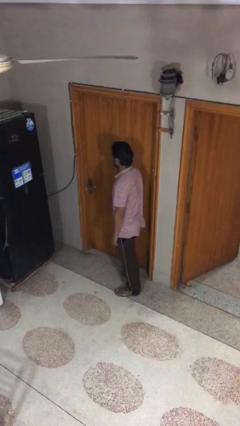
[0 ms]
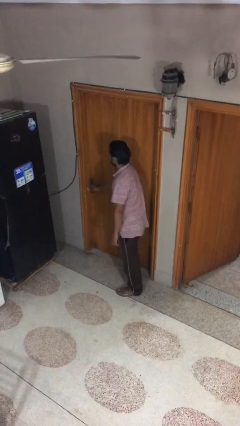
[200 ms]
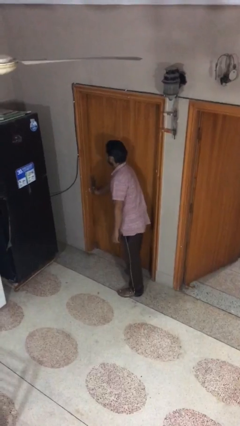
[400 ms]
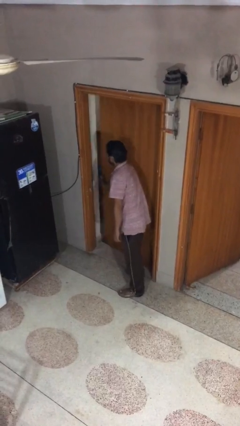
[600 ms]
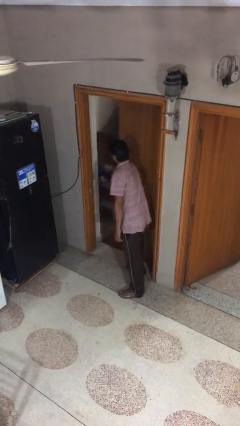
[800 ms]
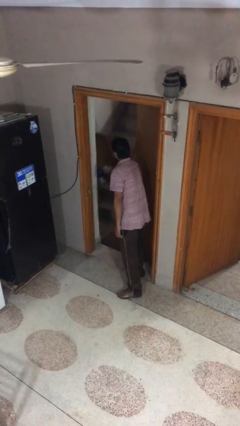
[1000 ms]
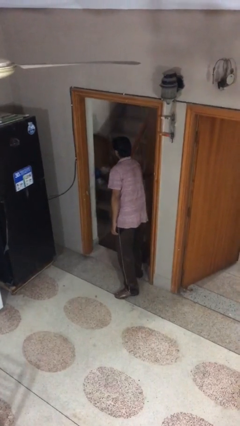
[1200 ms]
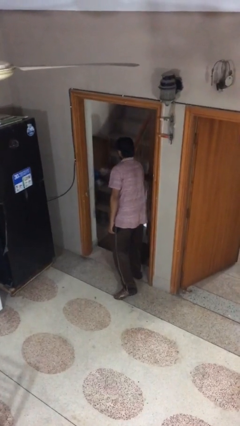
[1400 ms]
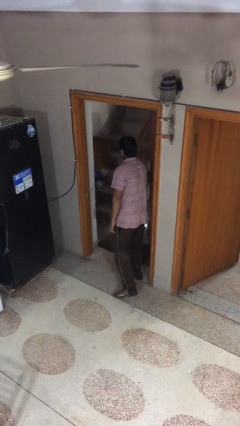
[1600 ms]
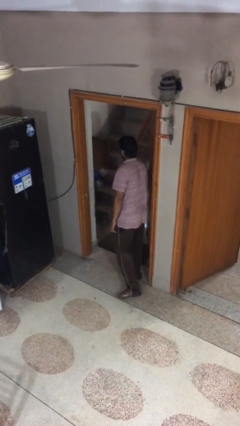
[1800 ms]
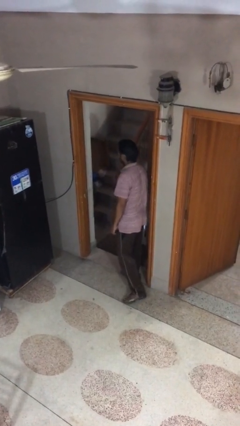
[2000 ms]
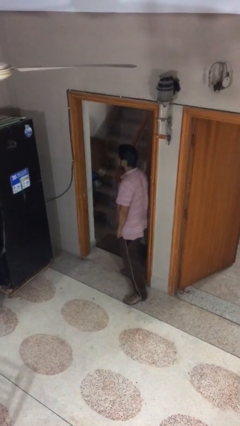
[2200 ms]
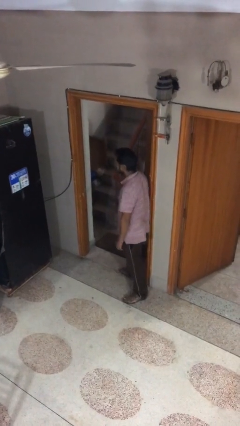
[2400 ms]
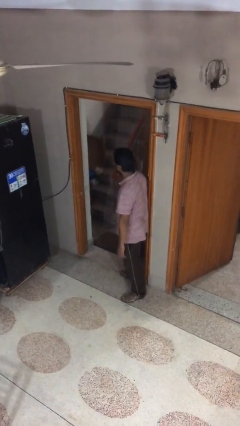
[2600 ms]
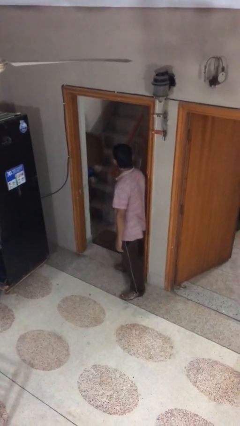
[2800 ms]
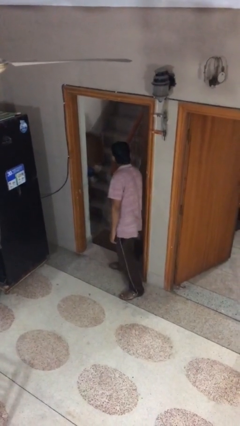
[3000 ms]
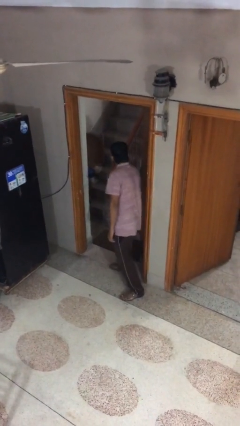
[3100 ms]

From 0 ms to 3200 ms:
person opens facility door

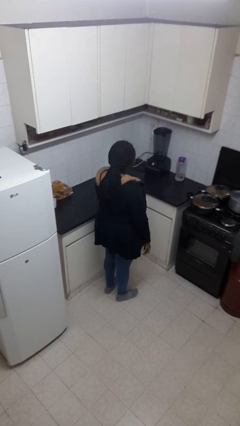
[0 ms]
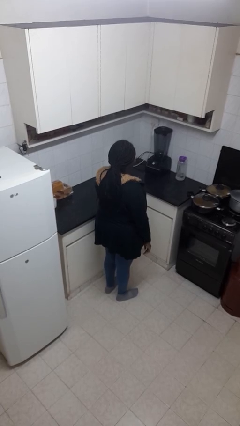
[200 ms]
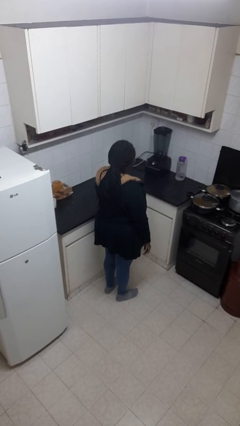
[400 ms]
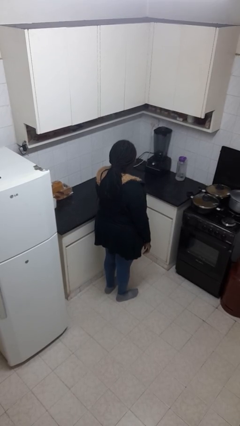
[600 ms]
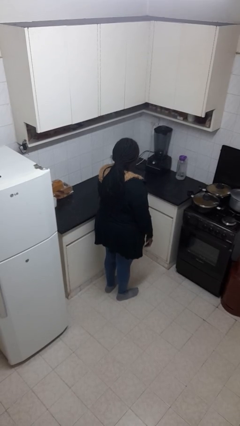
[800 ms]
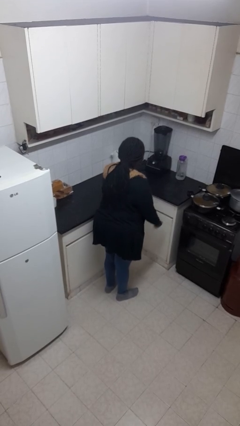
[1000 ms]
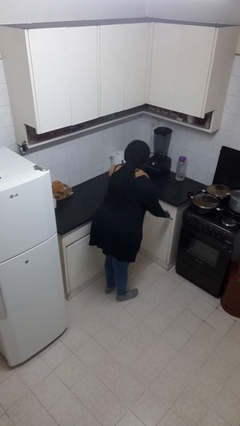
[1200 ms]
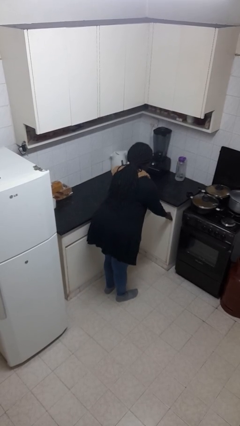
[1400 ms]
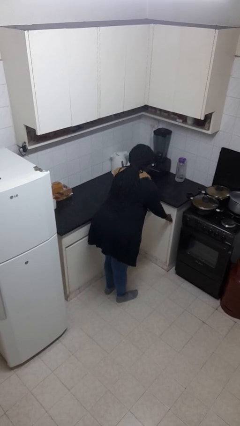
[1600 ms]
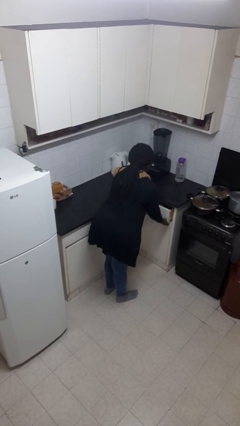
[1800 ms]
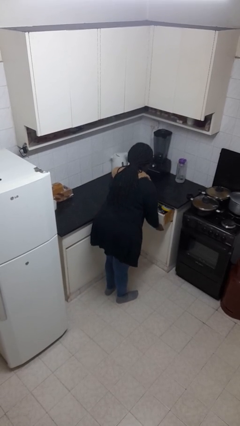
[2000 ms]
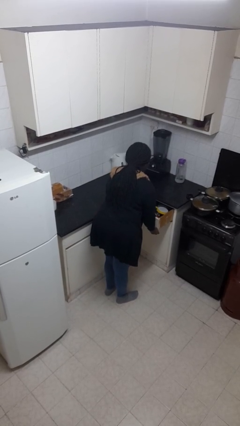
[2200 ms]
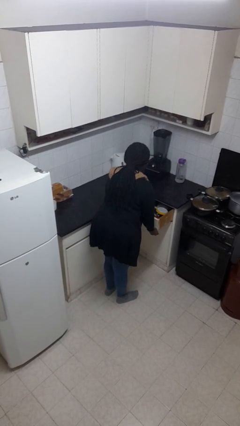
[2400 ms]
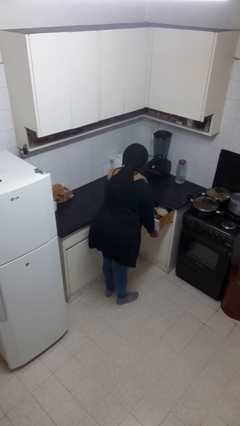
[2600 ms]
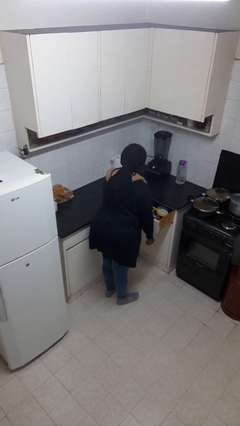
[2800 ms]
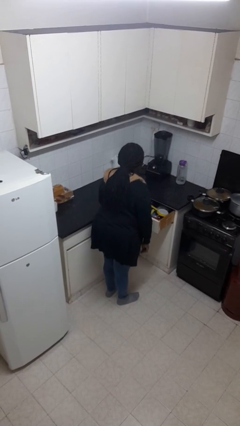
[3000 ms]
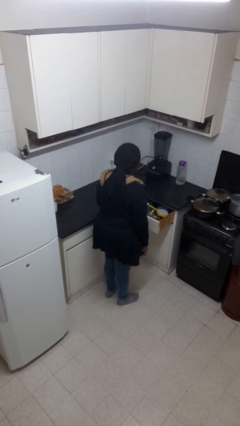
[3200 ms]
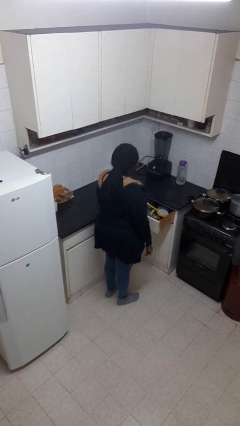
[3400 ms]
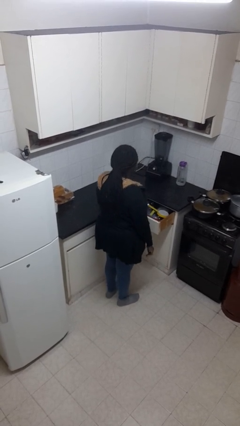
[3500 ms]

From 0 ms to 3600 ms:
person opens kitchen drawer

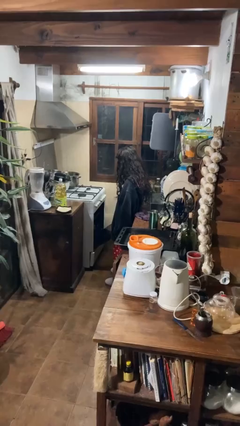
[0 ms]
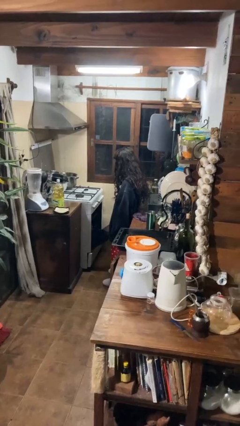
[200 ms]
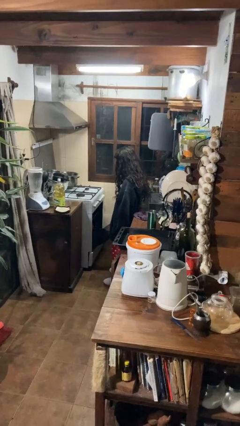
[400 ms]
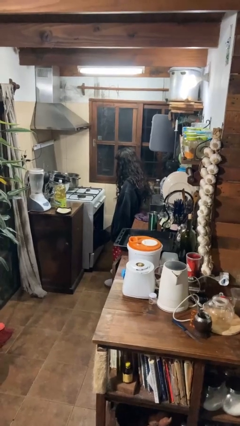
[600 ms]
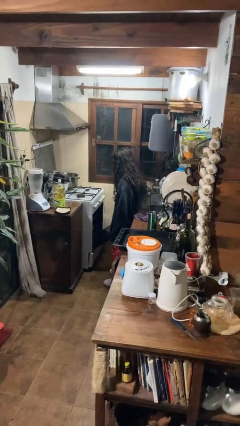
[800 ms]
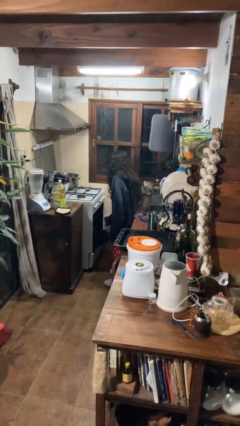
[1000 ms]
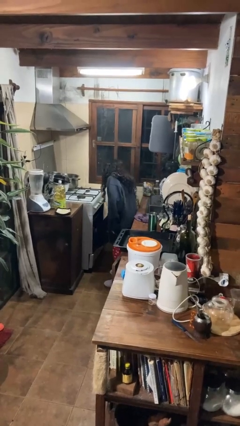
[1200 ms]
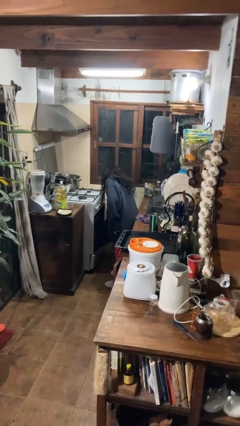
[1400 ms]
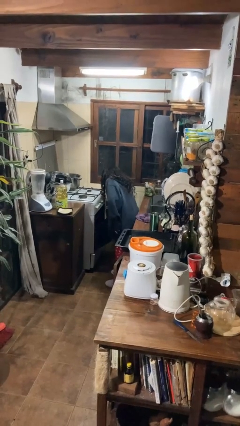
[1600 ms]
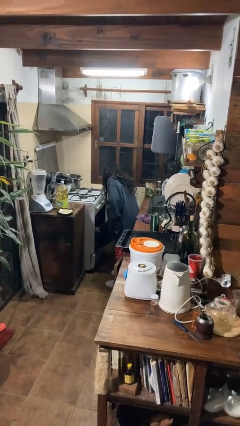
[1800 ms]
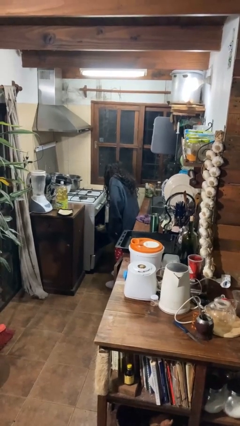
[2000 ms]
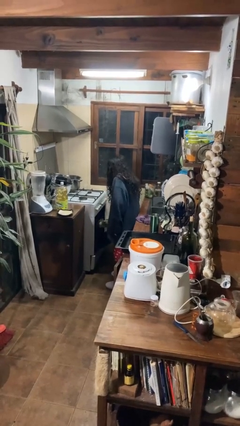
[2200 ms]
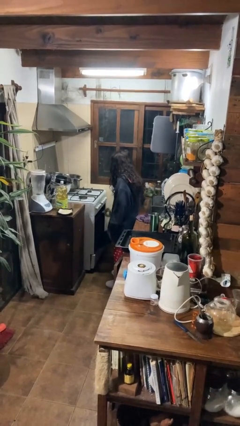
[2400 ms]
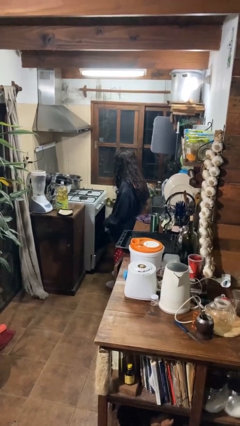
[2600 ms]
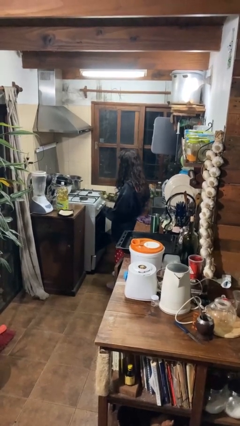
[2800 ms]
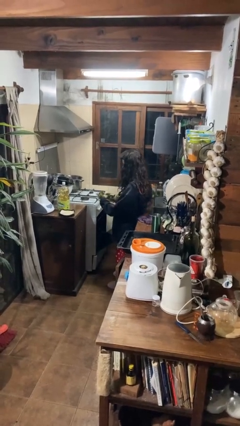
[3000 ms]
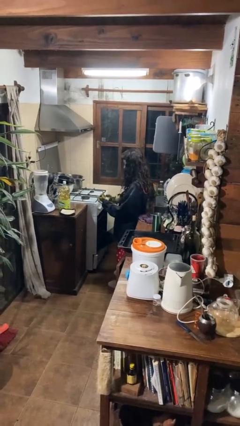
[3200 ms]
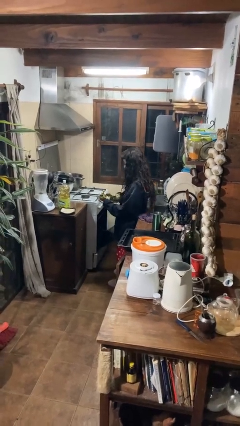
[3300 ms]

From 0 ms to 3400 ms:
person takes object from oven

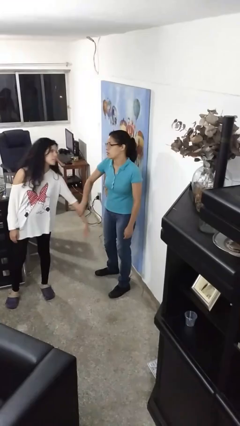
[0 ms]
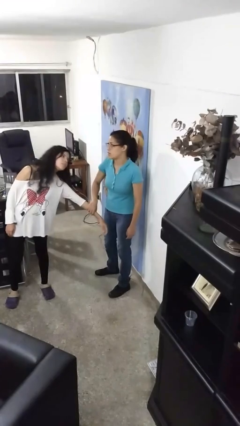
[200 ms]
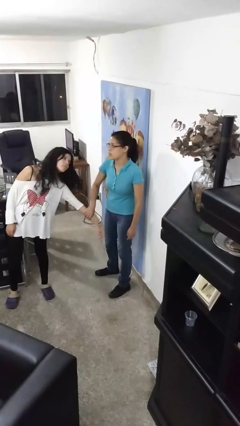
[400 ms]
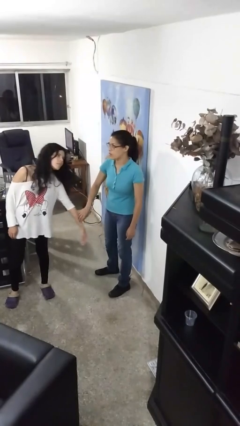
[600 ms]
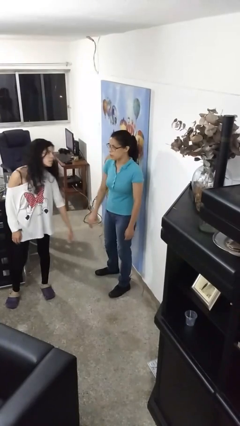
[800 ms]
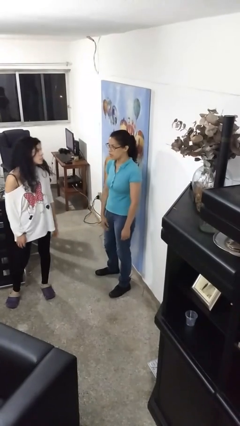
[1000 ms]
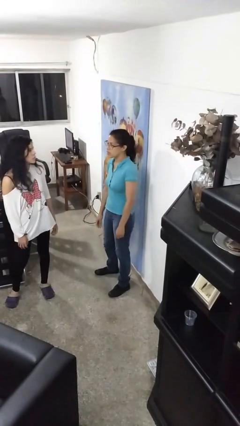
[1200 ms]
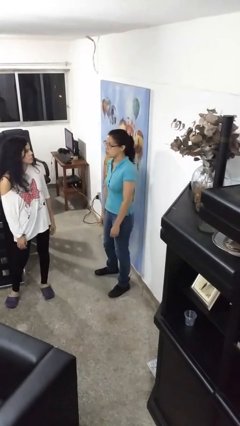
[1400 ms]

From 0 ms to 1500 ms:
person grabs person by forearm

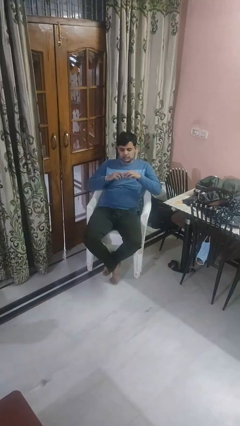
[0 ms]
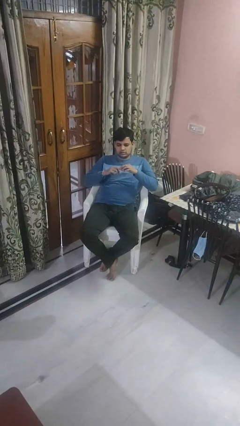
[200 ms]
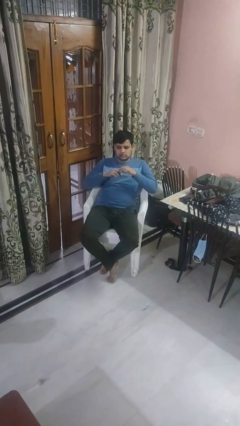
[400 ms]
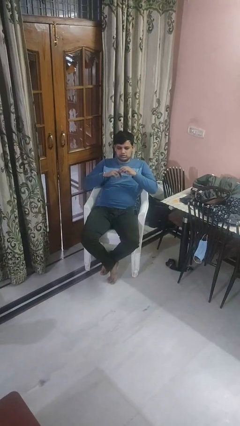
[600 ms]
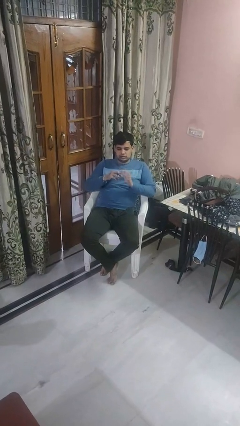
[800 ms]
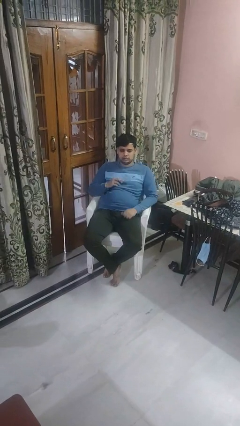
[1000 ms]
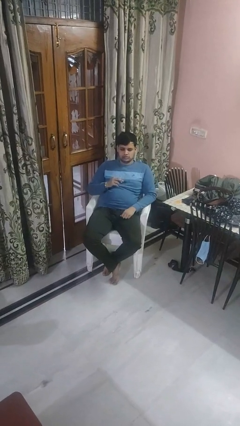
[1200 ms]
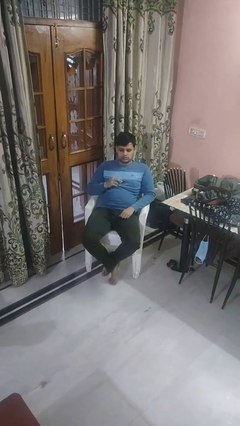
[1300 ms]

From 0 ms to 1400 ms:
person puts on ring

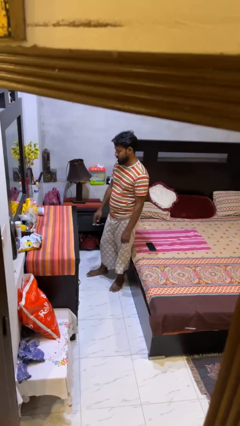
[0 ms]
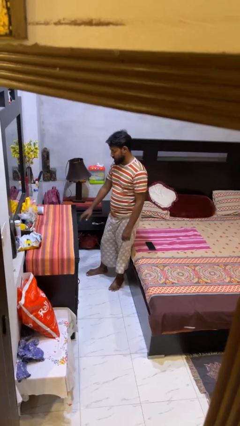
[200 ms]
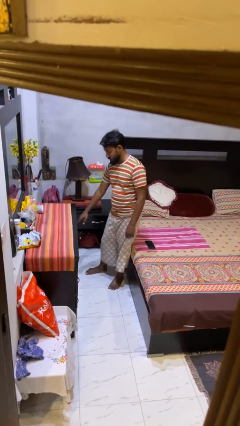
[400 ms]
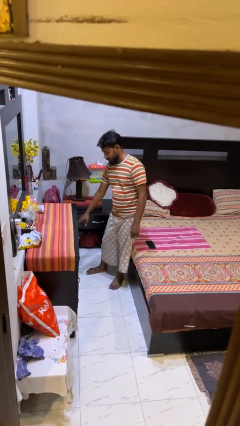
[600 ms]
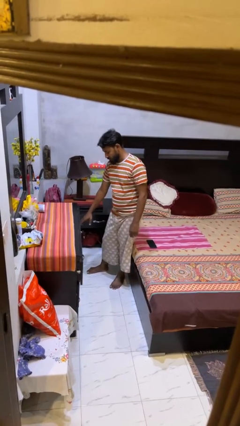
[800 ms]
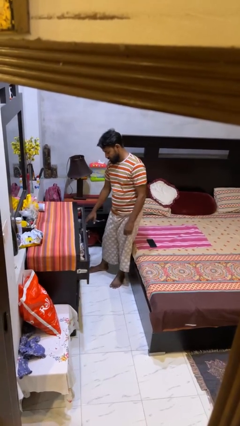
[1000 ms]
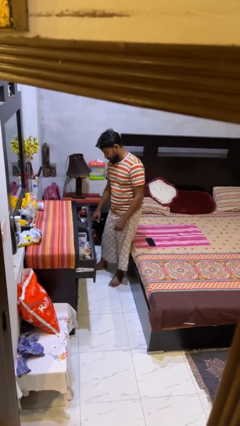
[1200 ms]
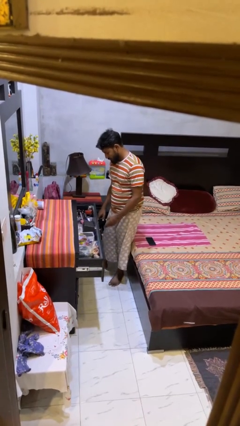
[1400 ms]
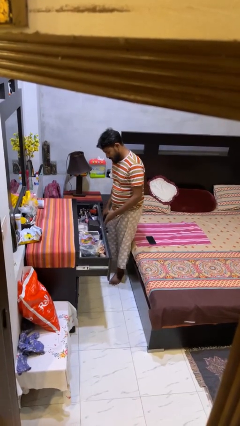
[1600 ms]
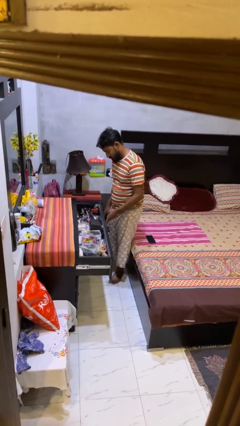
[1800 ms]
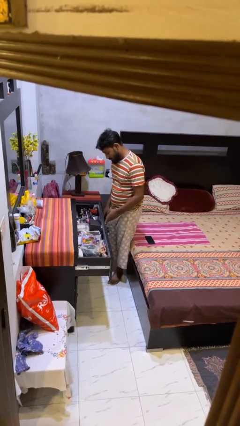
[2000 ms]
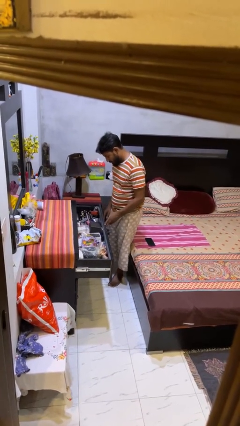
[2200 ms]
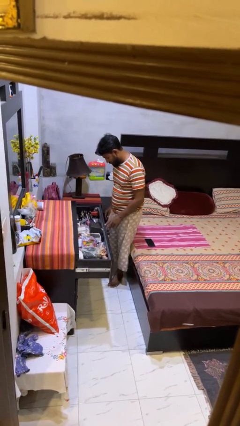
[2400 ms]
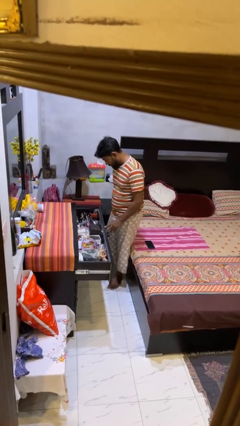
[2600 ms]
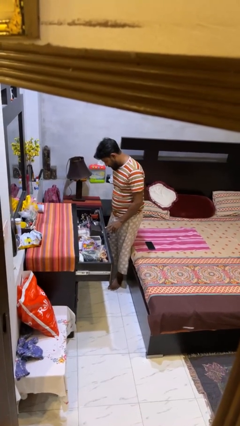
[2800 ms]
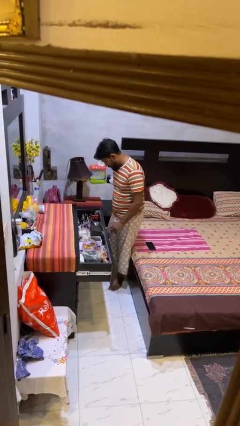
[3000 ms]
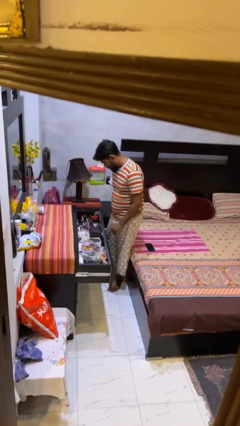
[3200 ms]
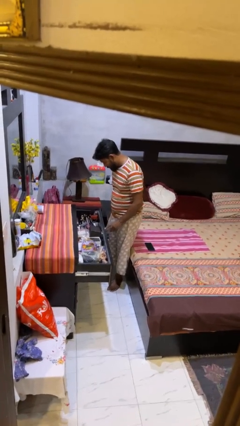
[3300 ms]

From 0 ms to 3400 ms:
person opens dresser drawer

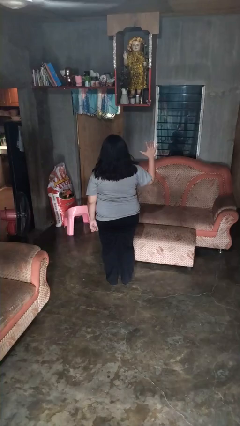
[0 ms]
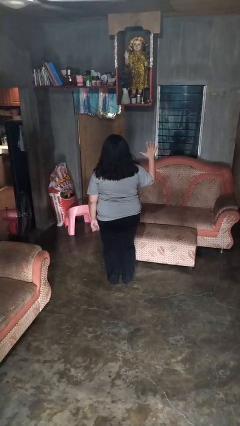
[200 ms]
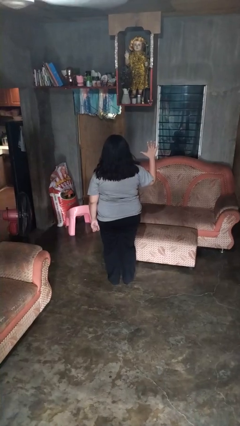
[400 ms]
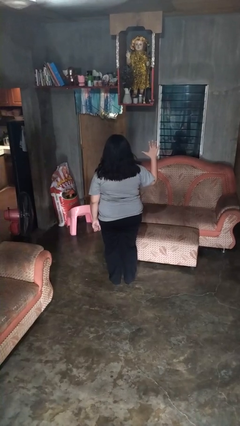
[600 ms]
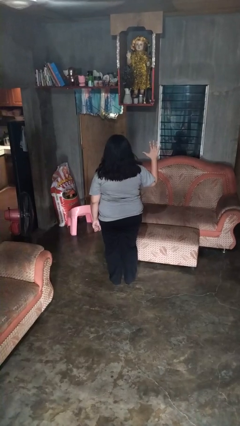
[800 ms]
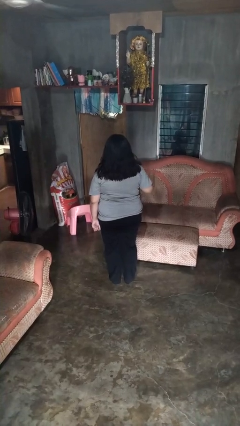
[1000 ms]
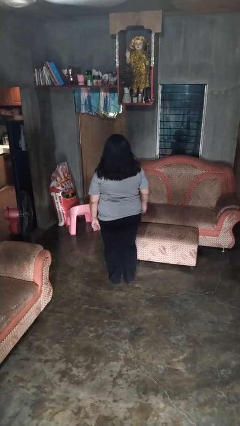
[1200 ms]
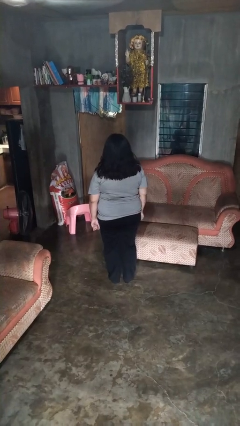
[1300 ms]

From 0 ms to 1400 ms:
person gestures number five
